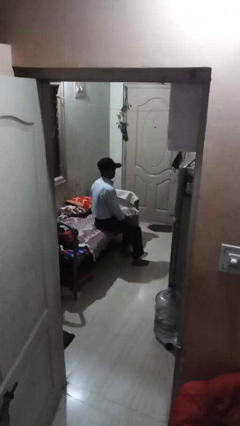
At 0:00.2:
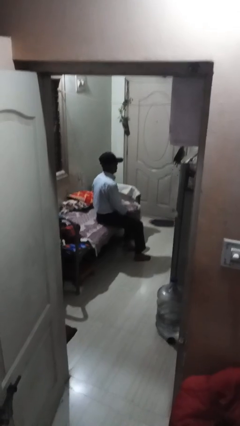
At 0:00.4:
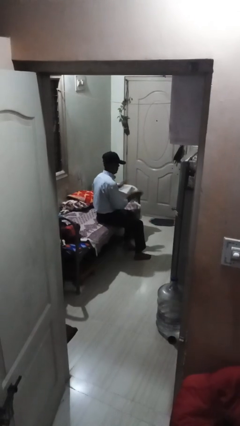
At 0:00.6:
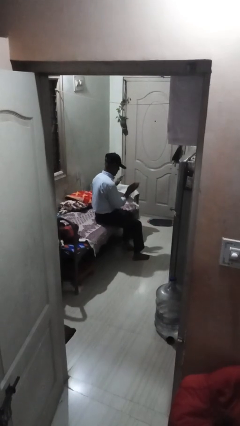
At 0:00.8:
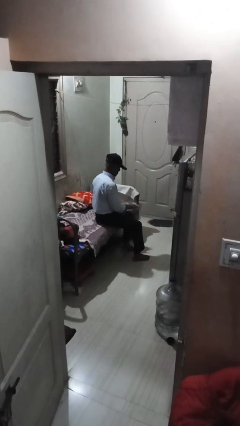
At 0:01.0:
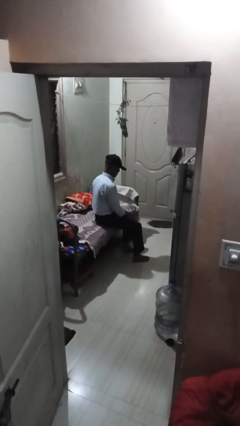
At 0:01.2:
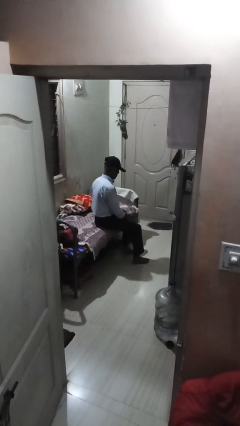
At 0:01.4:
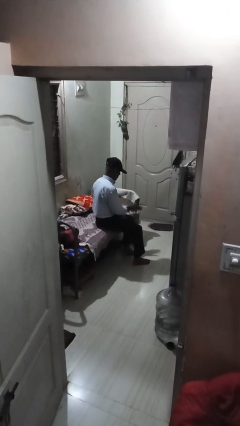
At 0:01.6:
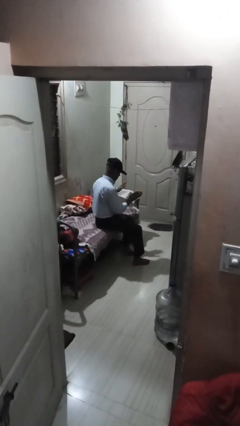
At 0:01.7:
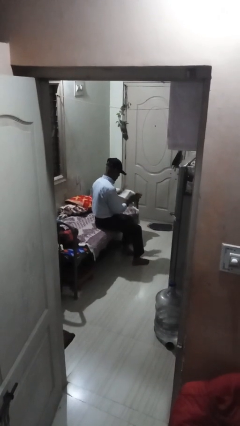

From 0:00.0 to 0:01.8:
person slaps hands on thighs

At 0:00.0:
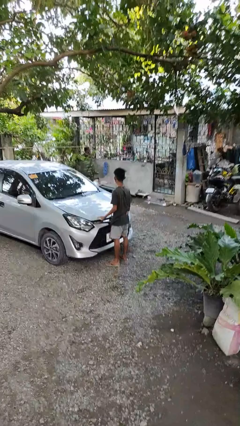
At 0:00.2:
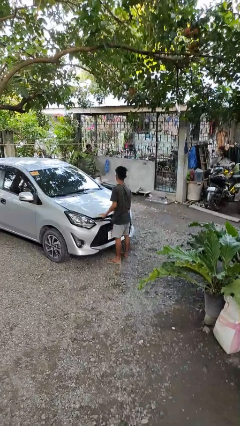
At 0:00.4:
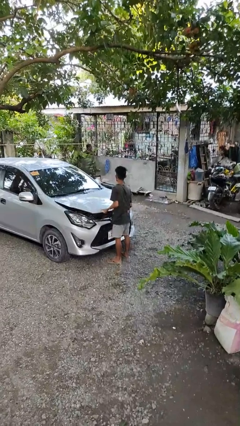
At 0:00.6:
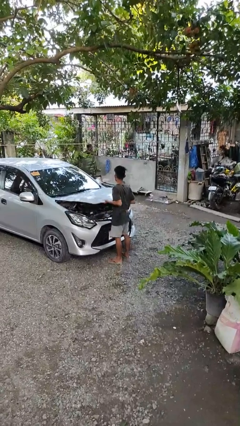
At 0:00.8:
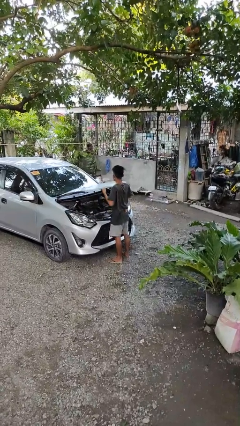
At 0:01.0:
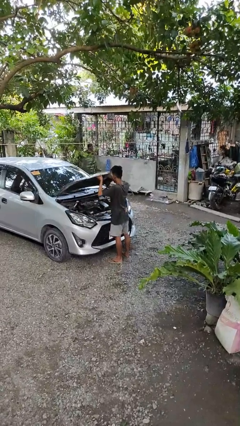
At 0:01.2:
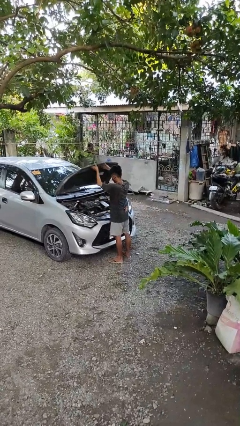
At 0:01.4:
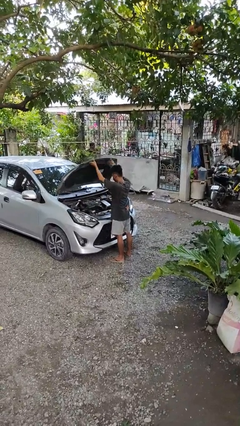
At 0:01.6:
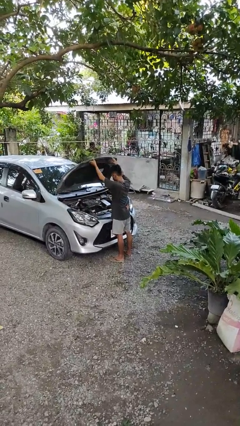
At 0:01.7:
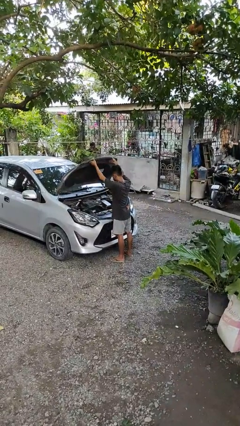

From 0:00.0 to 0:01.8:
person opens car hood

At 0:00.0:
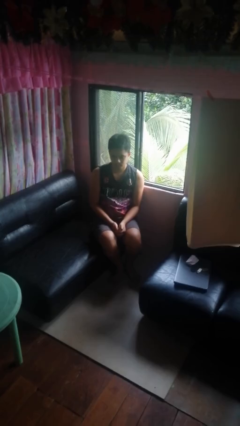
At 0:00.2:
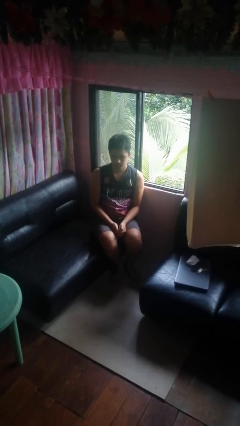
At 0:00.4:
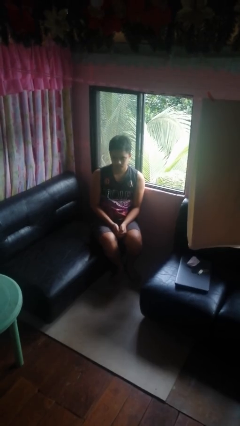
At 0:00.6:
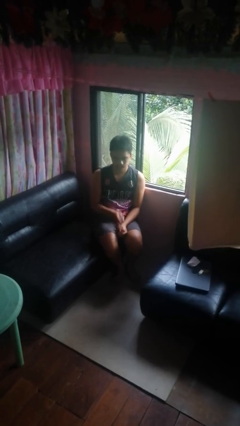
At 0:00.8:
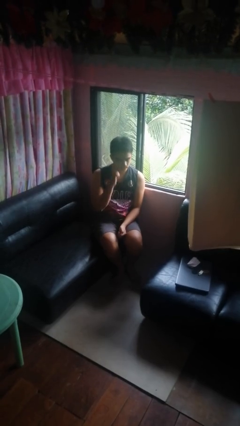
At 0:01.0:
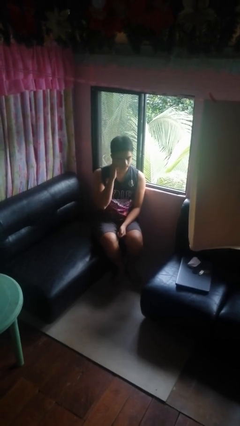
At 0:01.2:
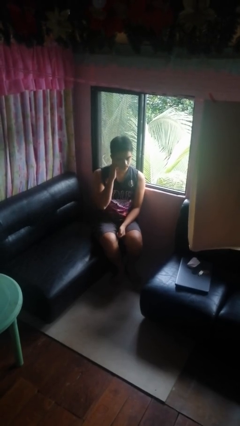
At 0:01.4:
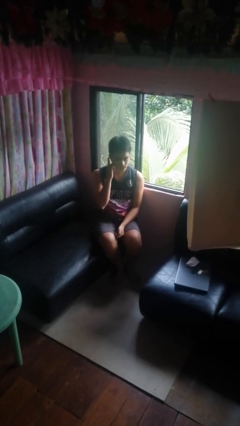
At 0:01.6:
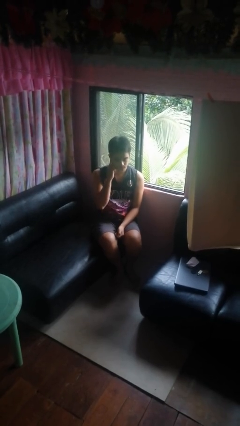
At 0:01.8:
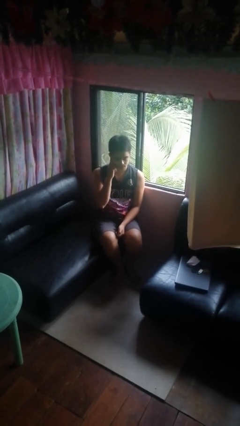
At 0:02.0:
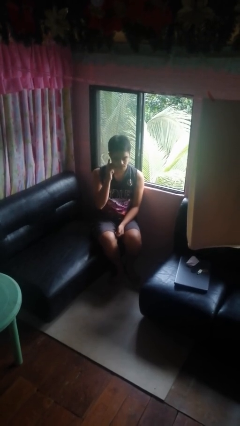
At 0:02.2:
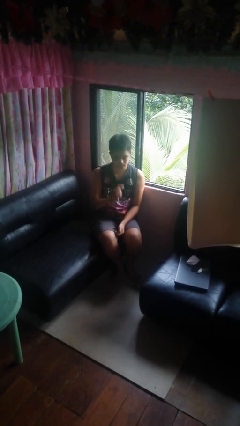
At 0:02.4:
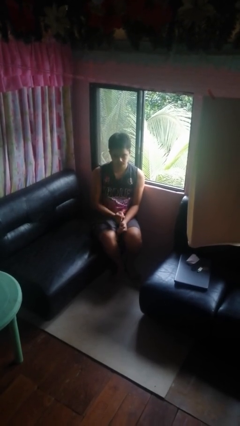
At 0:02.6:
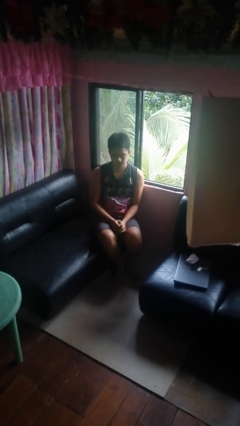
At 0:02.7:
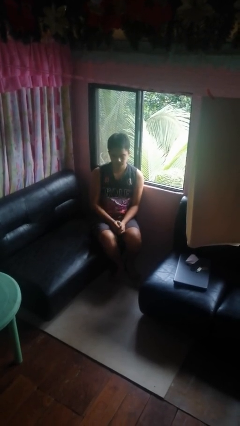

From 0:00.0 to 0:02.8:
person gestures listen closely

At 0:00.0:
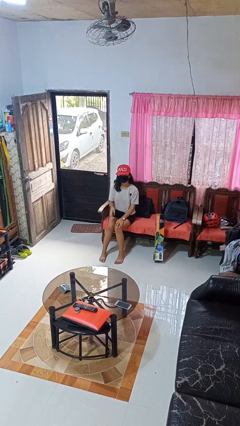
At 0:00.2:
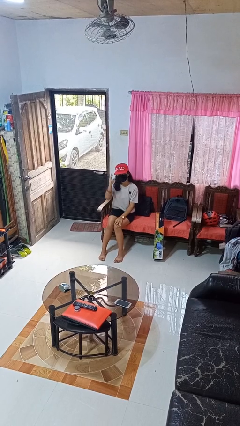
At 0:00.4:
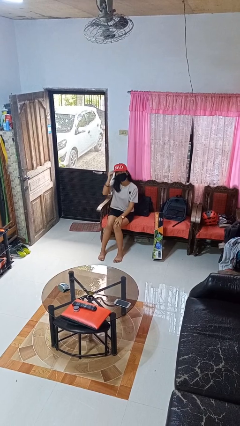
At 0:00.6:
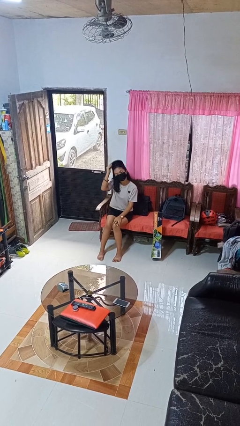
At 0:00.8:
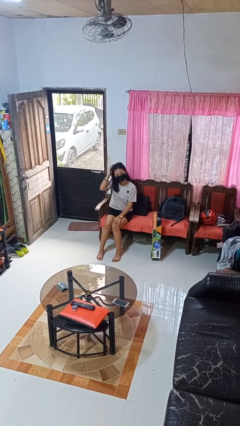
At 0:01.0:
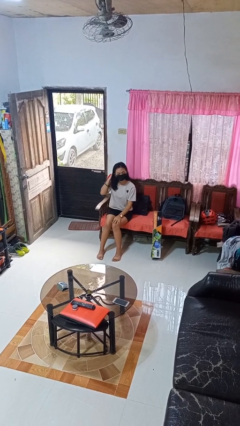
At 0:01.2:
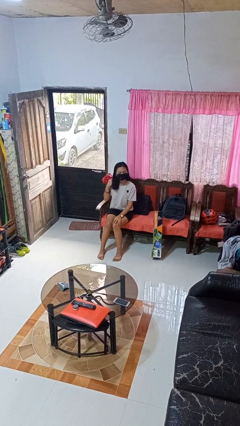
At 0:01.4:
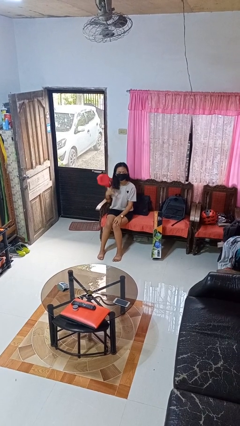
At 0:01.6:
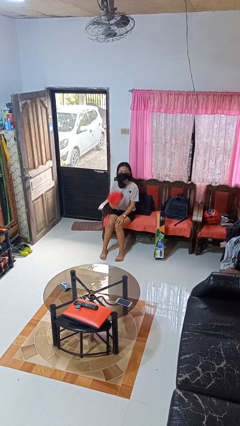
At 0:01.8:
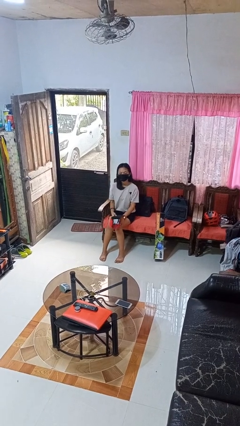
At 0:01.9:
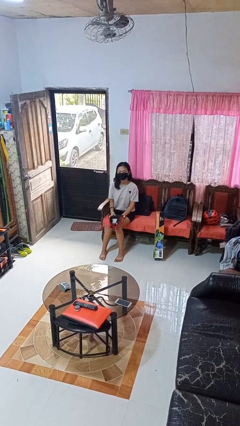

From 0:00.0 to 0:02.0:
person takes off hat

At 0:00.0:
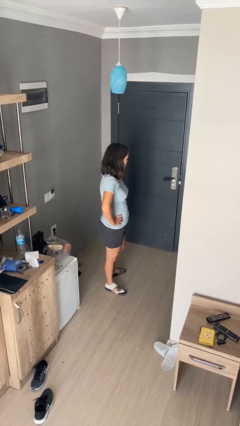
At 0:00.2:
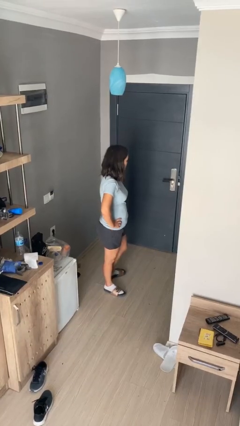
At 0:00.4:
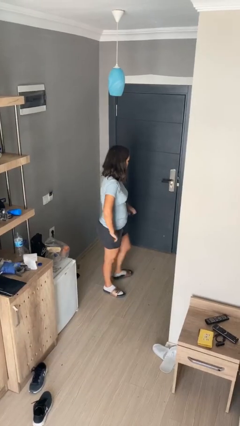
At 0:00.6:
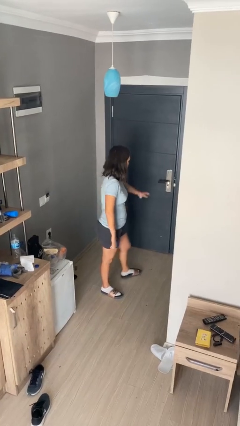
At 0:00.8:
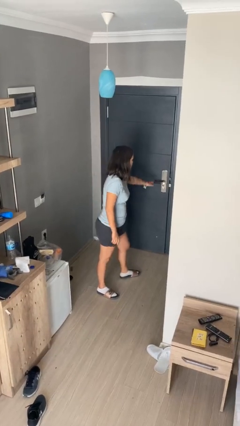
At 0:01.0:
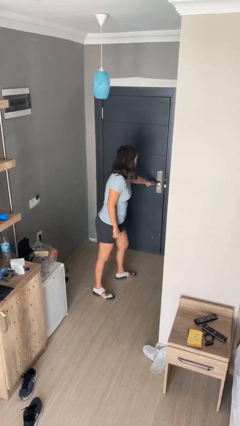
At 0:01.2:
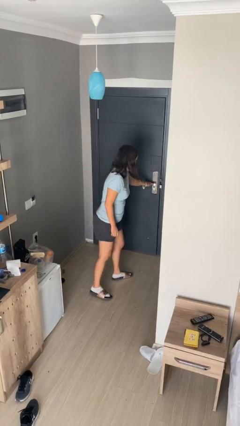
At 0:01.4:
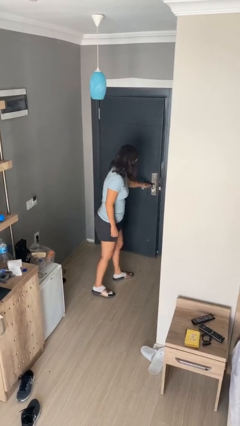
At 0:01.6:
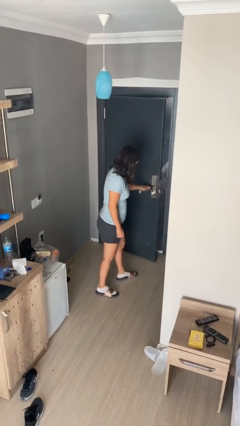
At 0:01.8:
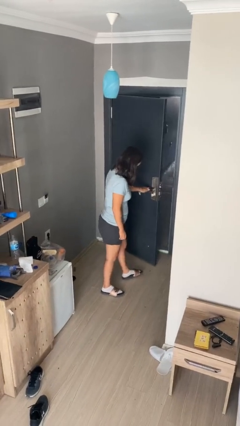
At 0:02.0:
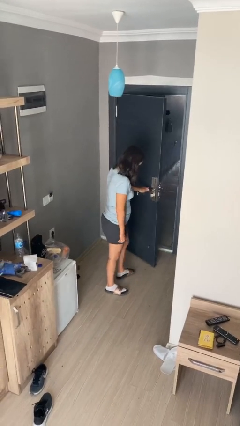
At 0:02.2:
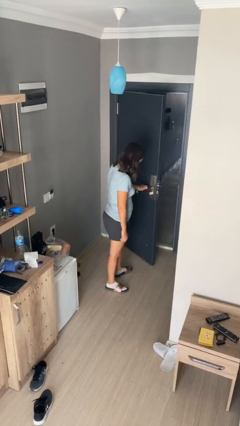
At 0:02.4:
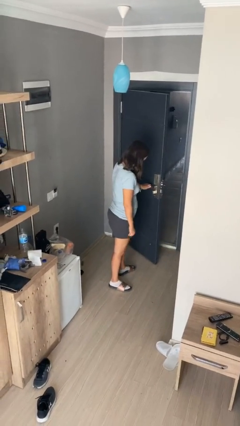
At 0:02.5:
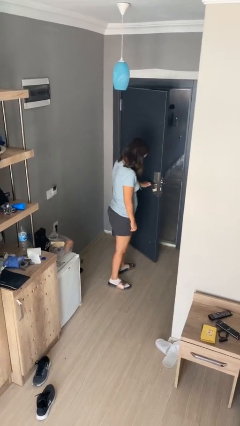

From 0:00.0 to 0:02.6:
person opens facility door

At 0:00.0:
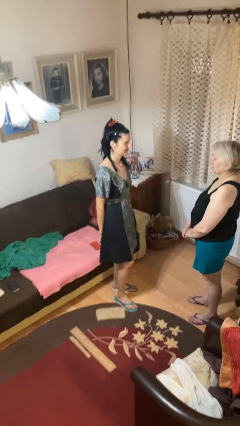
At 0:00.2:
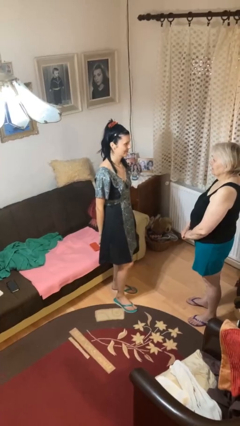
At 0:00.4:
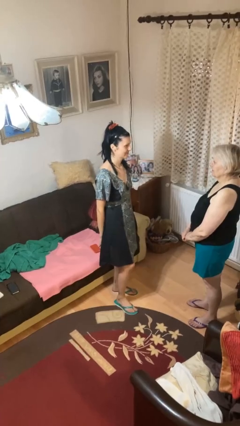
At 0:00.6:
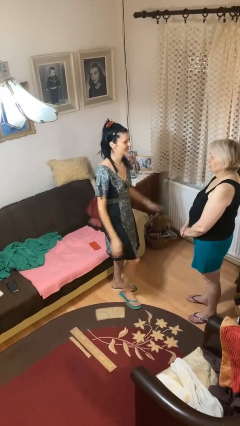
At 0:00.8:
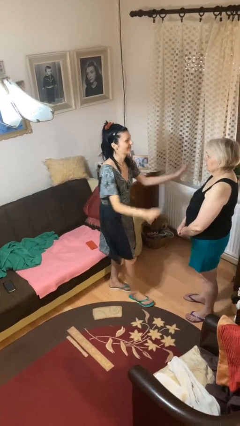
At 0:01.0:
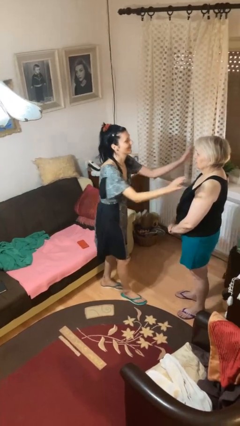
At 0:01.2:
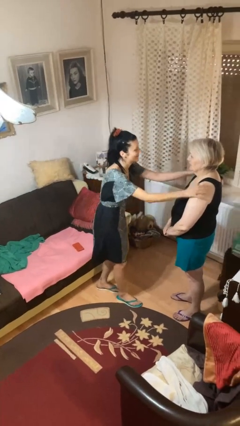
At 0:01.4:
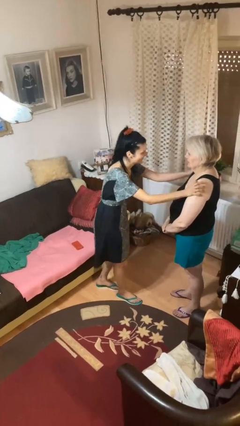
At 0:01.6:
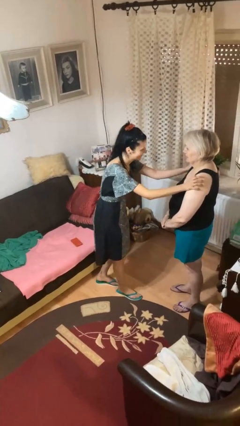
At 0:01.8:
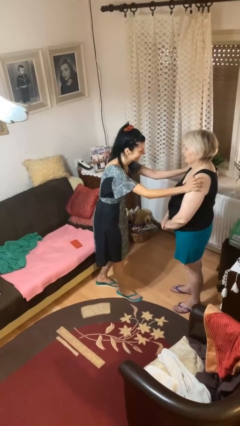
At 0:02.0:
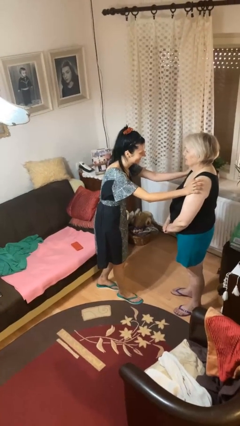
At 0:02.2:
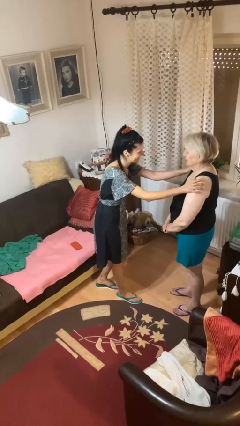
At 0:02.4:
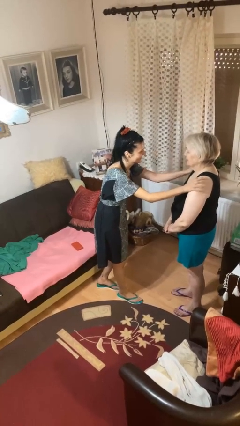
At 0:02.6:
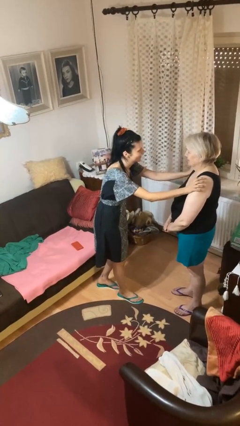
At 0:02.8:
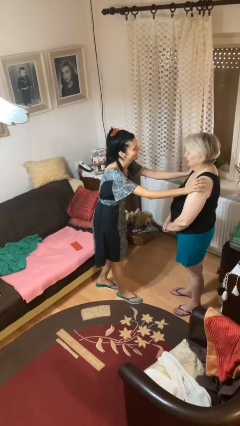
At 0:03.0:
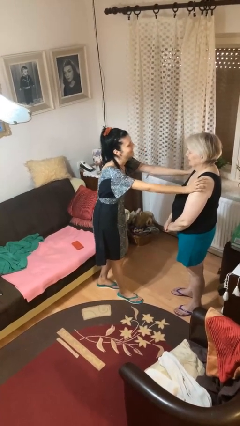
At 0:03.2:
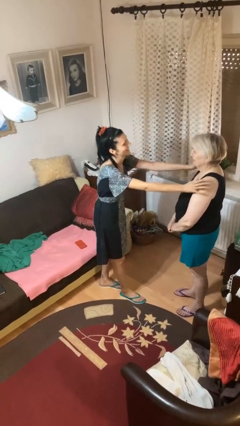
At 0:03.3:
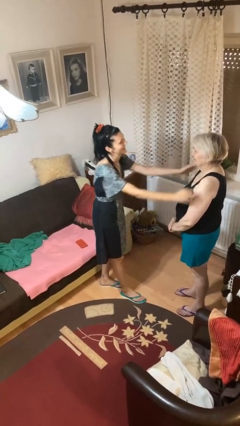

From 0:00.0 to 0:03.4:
person pounds shoulders of person

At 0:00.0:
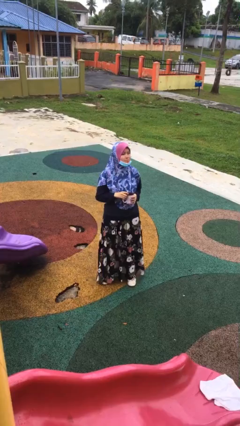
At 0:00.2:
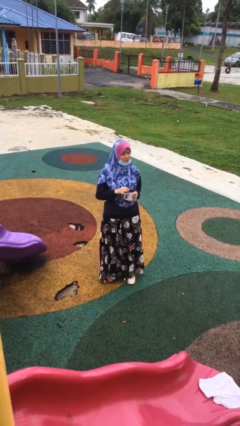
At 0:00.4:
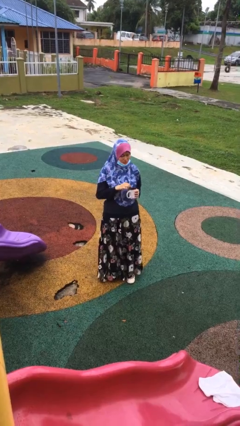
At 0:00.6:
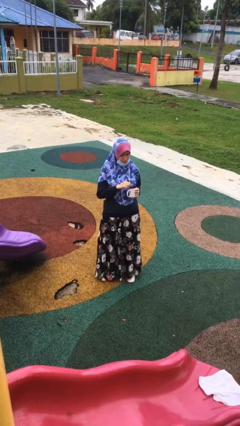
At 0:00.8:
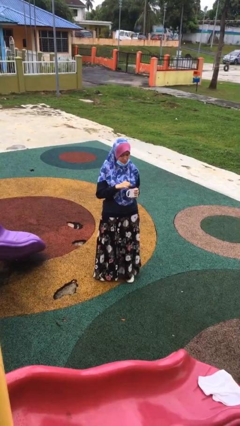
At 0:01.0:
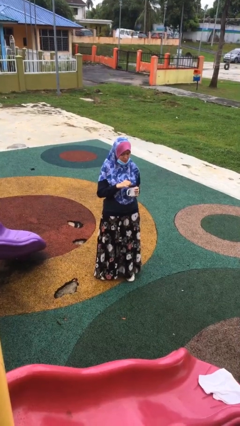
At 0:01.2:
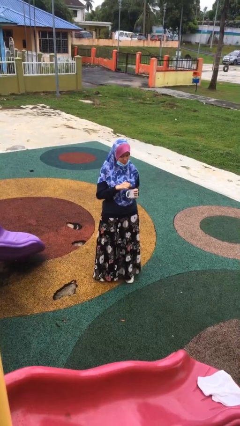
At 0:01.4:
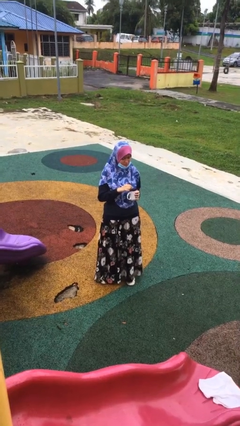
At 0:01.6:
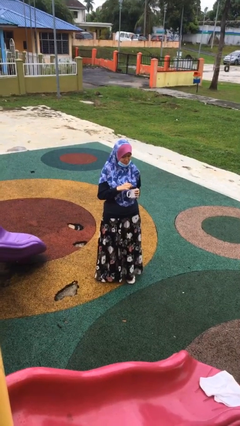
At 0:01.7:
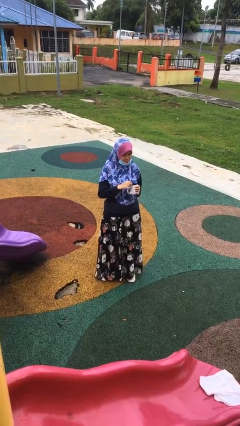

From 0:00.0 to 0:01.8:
person stirs mug

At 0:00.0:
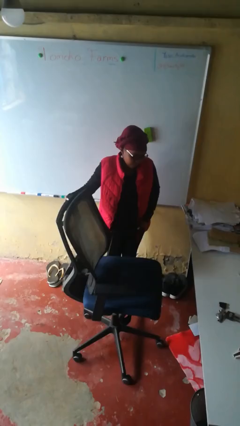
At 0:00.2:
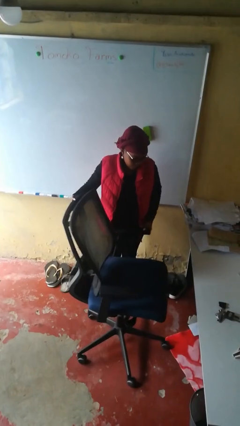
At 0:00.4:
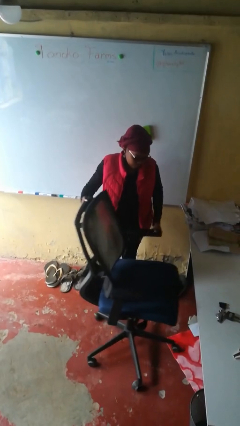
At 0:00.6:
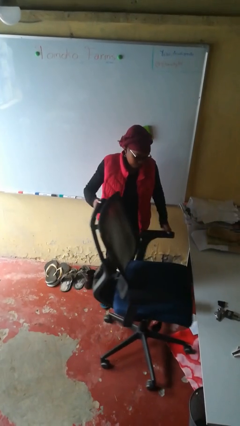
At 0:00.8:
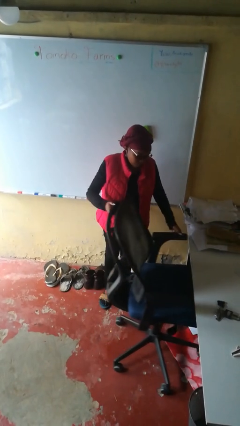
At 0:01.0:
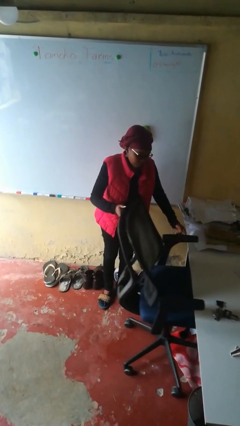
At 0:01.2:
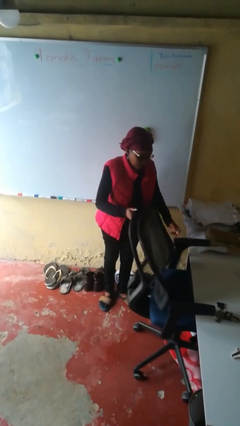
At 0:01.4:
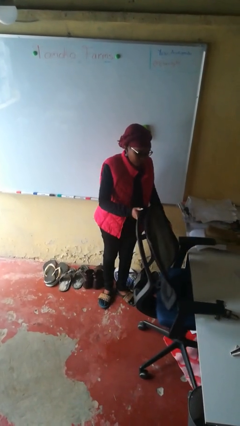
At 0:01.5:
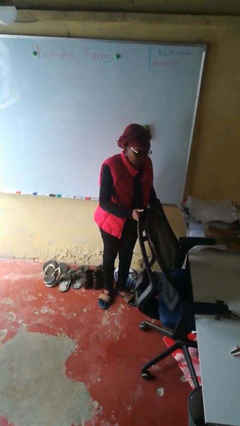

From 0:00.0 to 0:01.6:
person pushes in chair
